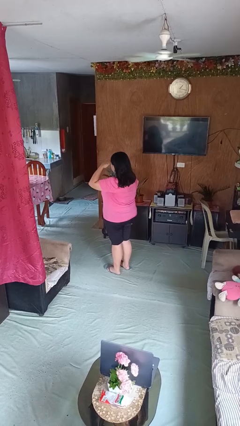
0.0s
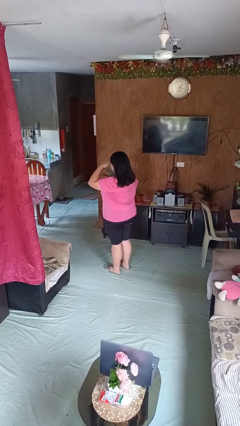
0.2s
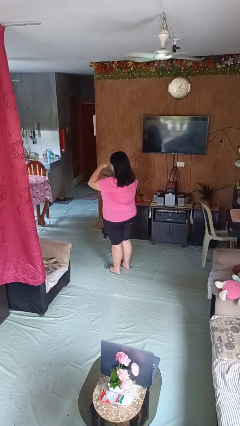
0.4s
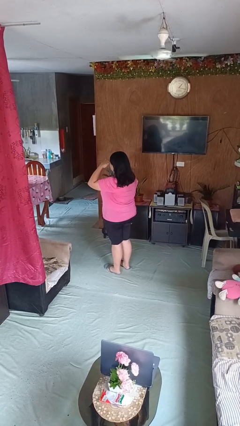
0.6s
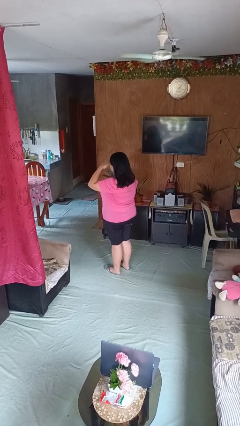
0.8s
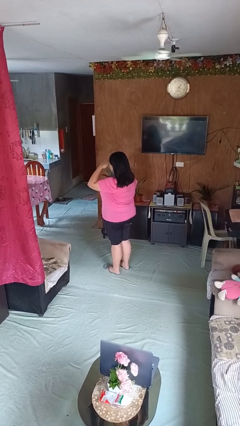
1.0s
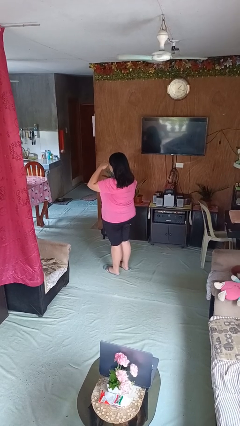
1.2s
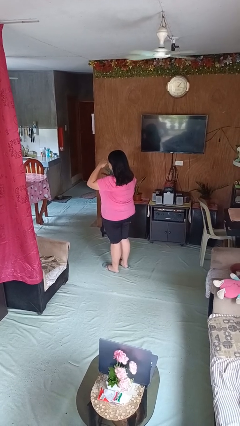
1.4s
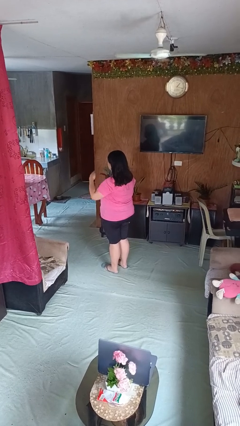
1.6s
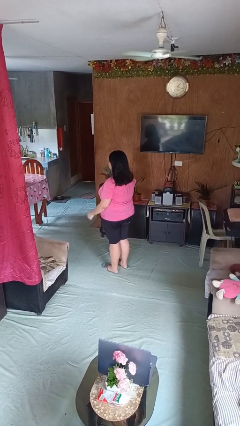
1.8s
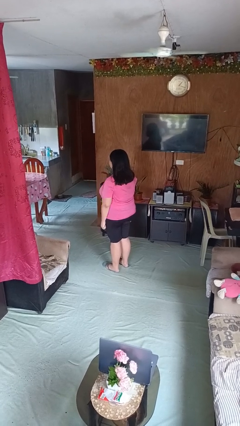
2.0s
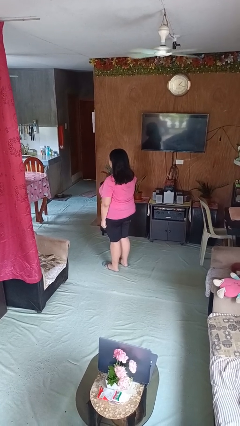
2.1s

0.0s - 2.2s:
person salutes

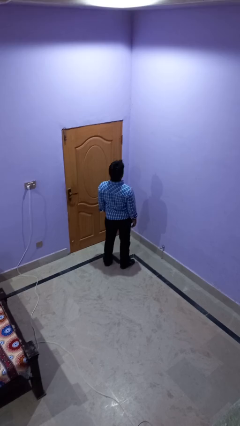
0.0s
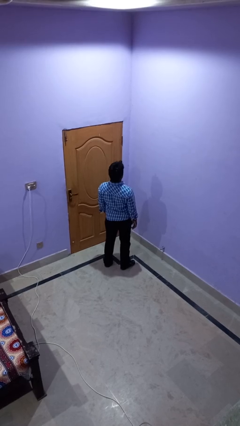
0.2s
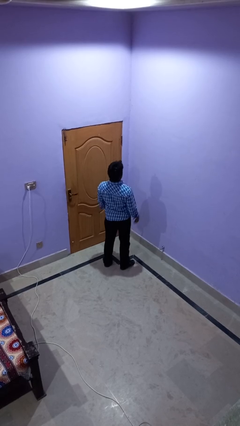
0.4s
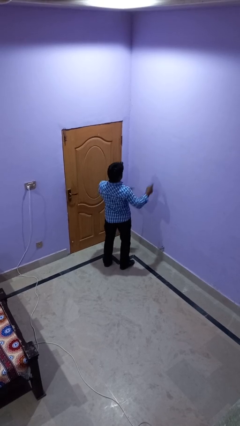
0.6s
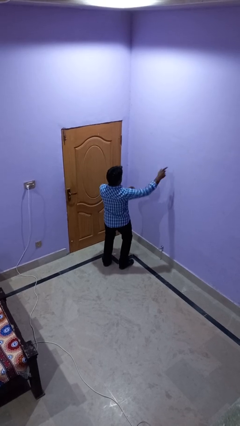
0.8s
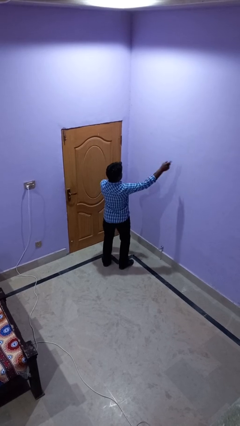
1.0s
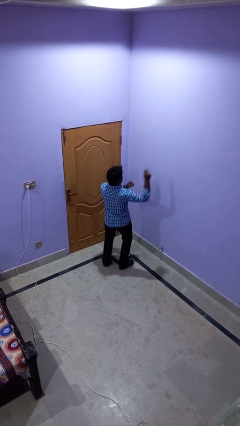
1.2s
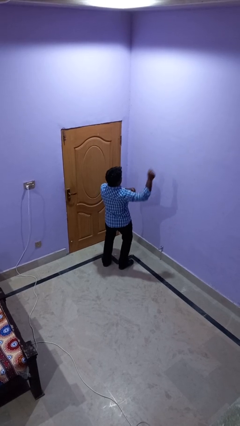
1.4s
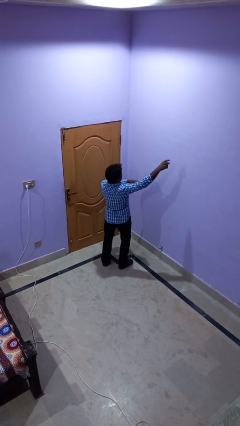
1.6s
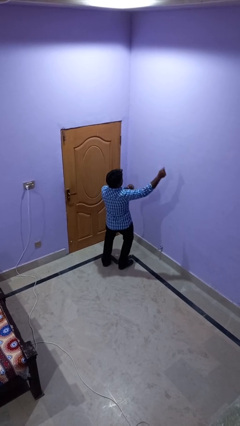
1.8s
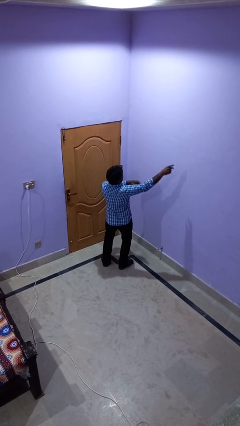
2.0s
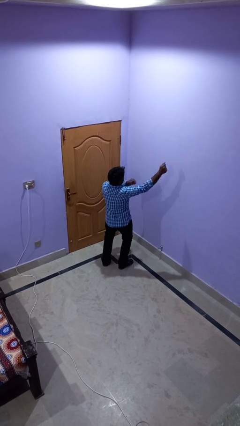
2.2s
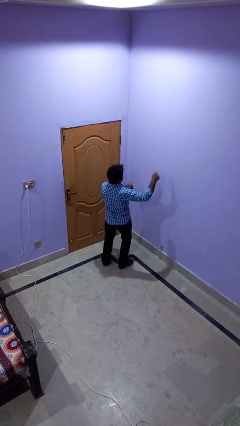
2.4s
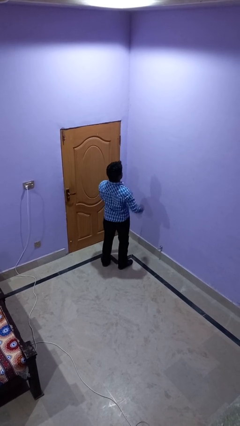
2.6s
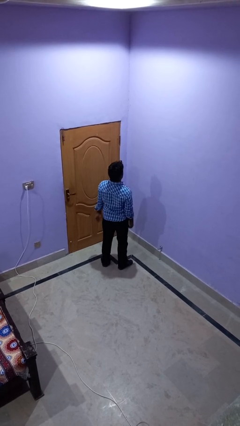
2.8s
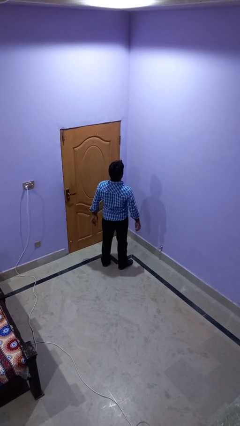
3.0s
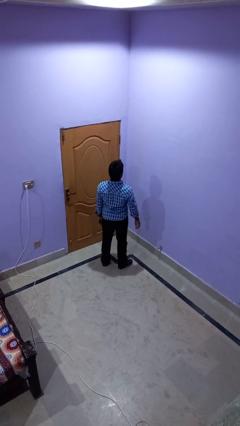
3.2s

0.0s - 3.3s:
person dances in place

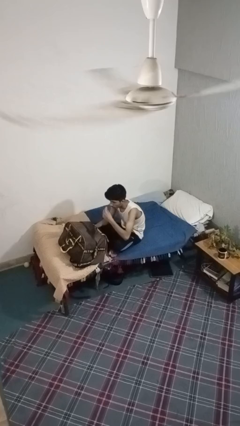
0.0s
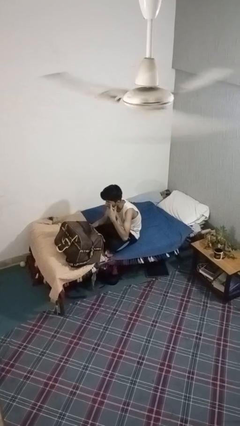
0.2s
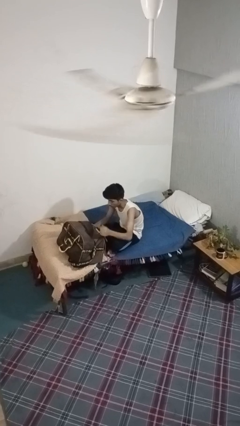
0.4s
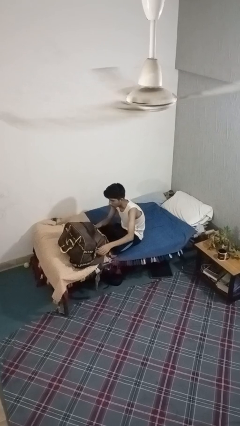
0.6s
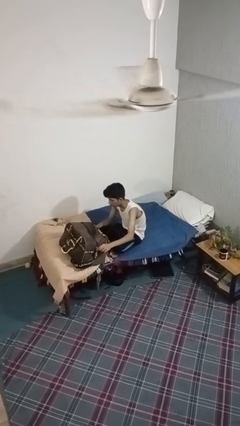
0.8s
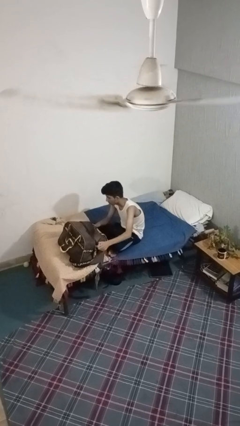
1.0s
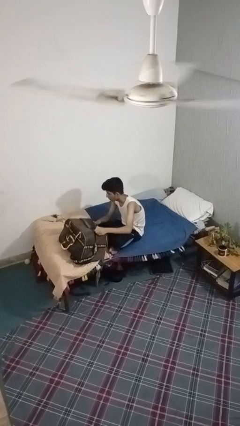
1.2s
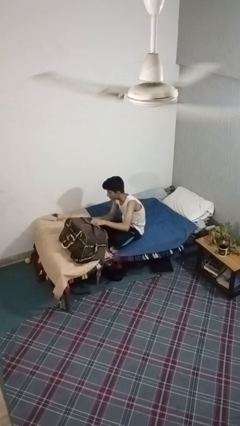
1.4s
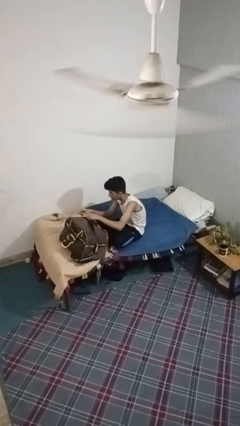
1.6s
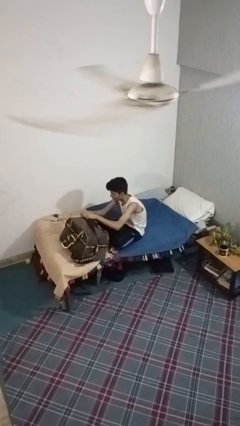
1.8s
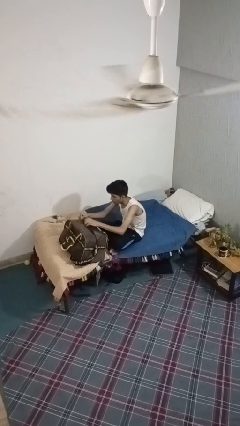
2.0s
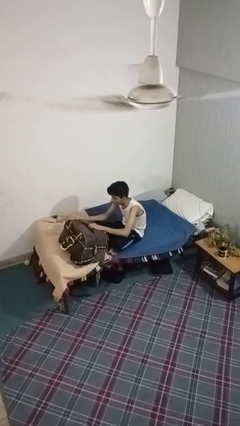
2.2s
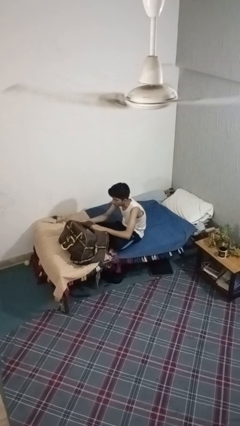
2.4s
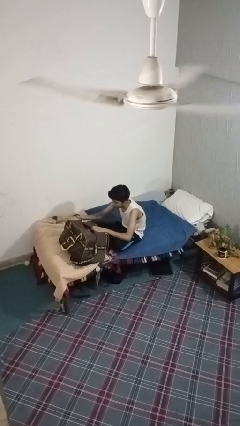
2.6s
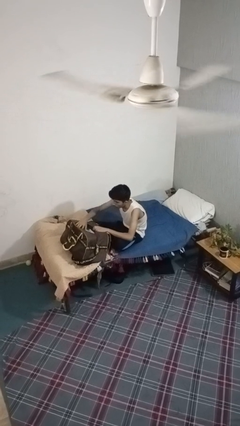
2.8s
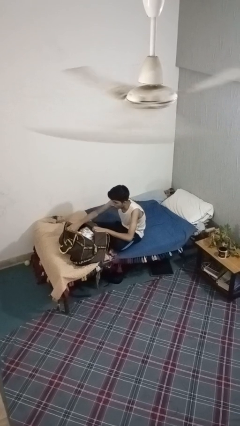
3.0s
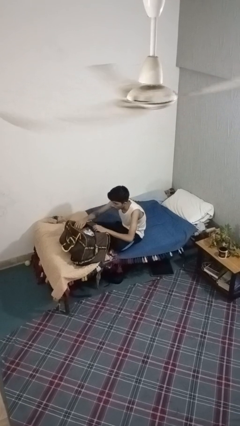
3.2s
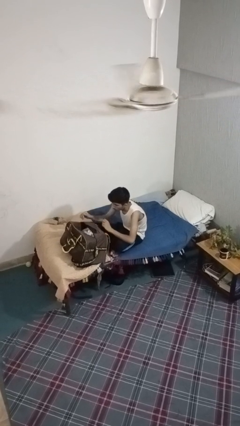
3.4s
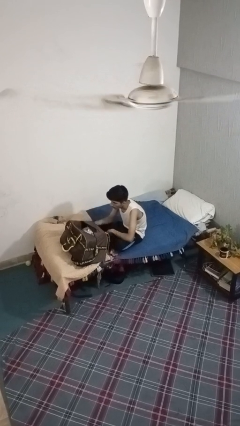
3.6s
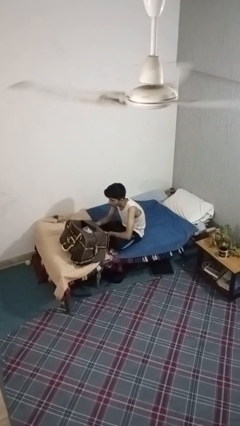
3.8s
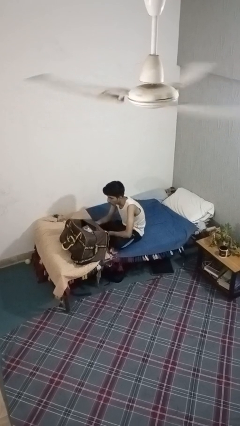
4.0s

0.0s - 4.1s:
person opens suitcase

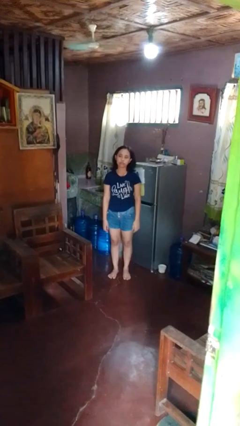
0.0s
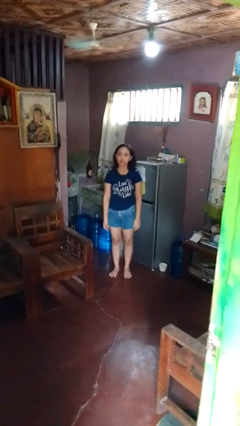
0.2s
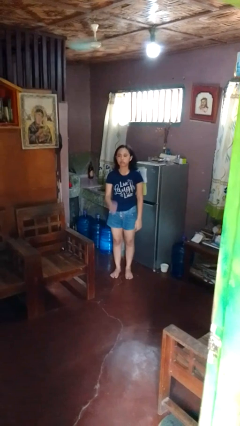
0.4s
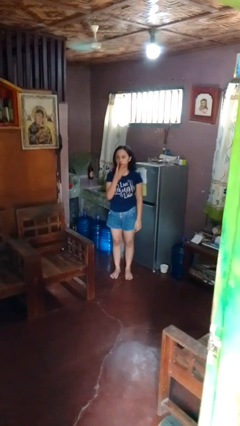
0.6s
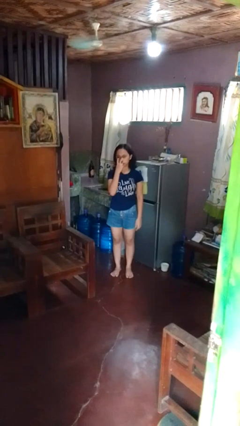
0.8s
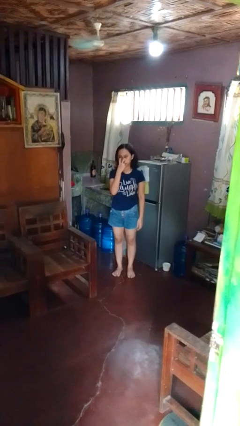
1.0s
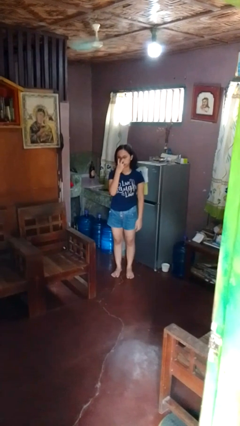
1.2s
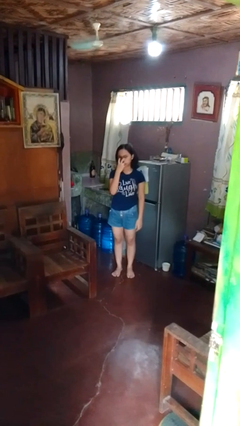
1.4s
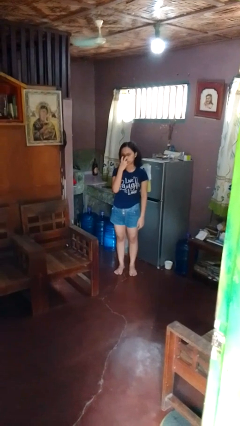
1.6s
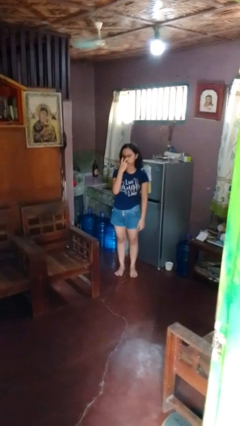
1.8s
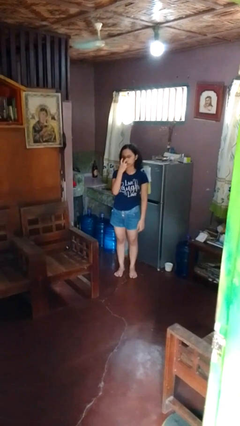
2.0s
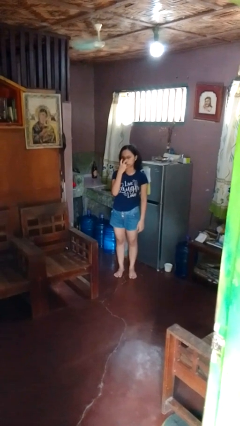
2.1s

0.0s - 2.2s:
person gestures watch closely

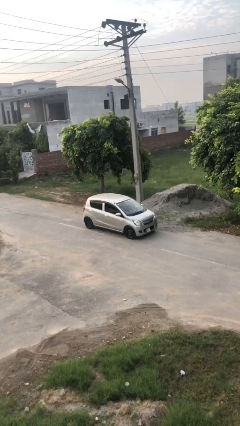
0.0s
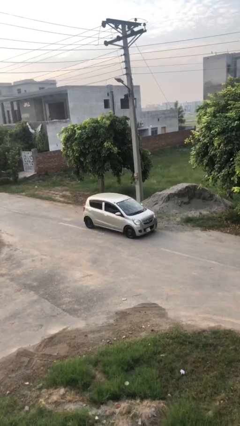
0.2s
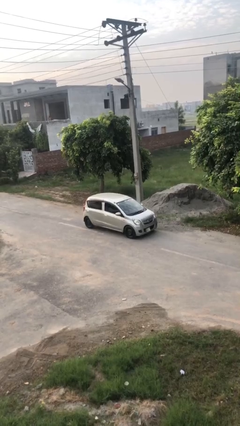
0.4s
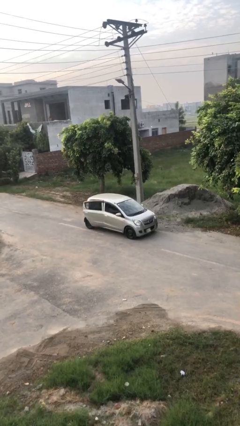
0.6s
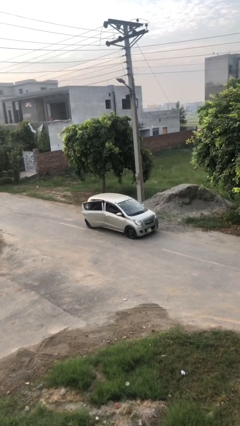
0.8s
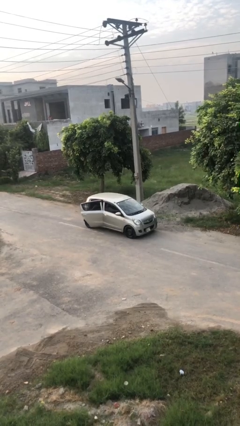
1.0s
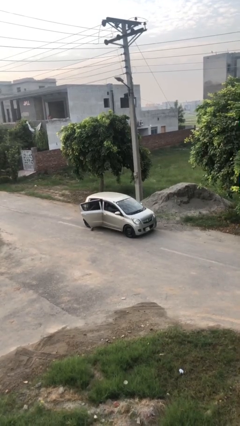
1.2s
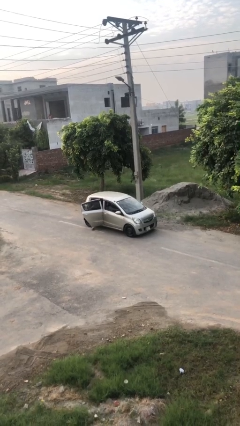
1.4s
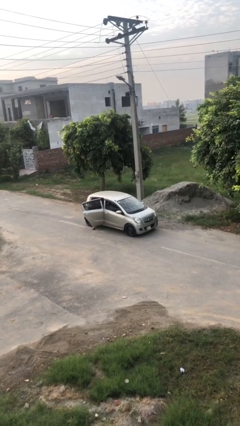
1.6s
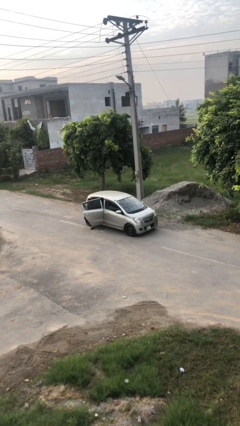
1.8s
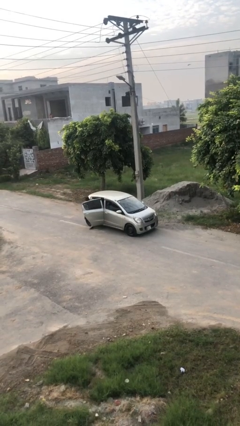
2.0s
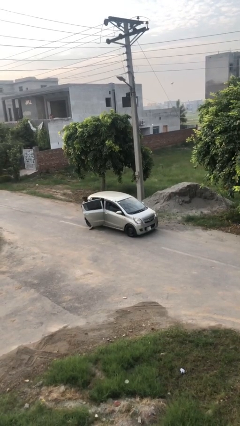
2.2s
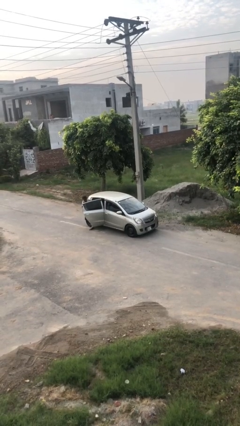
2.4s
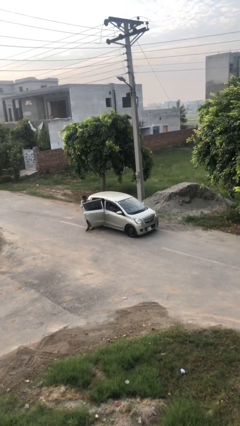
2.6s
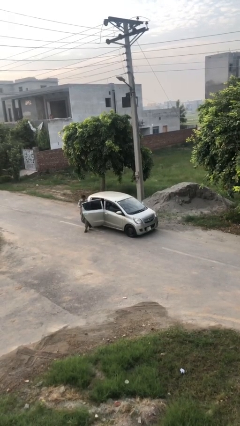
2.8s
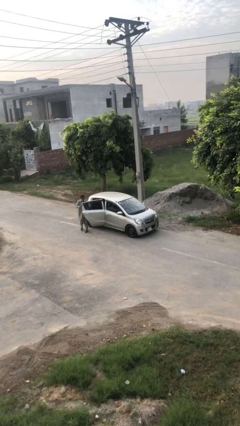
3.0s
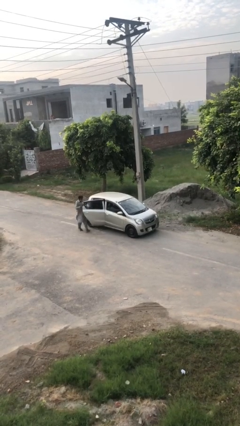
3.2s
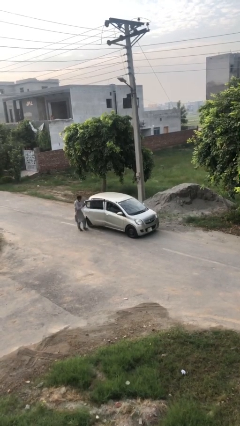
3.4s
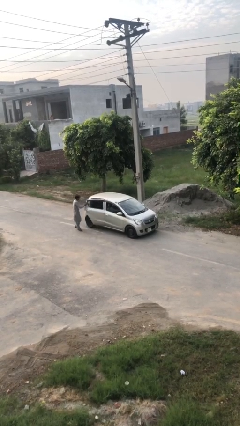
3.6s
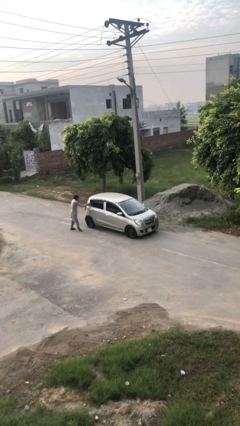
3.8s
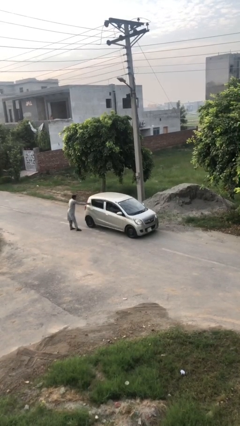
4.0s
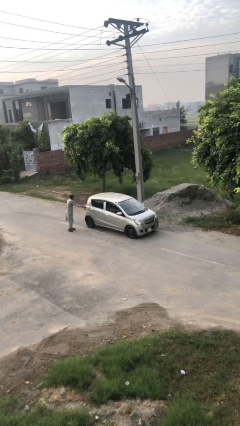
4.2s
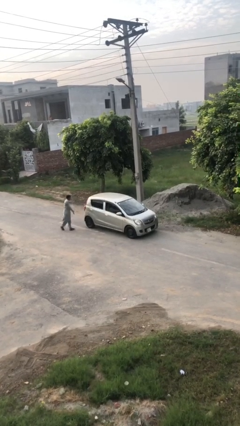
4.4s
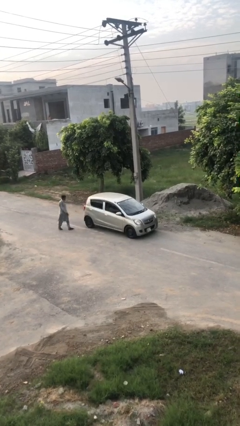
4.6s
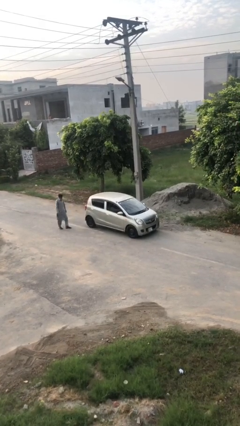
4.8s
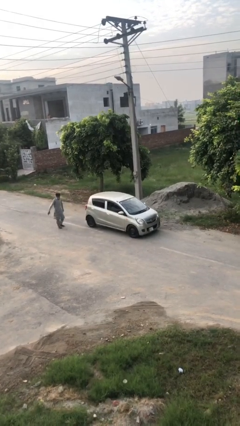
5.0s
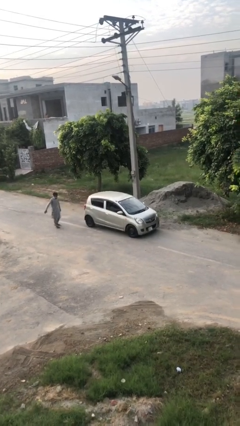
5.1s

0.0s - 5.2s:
car drops off person

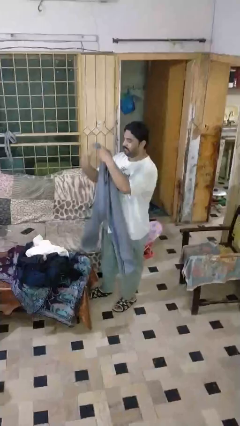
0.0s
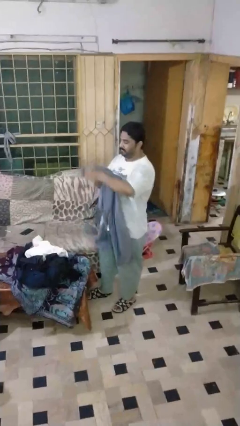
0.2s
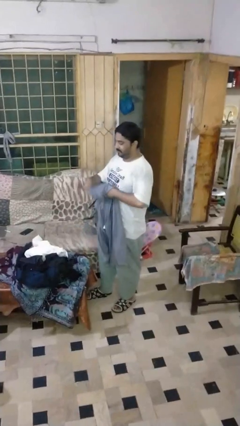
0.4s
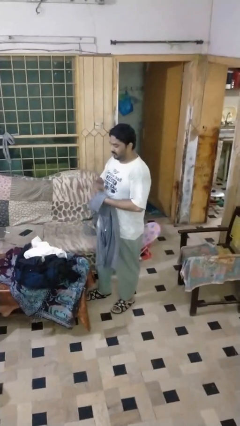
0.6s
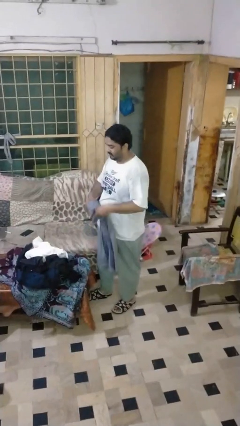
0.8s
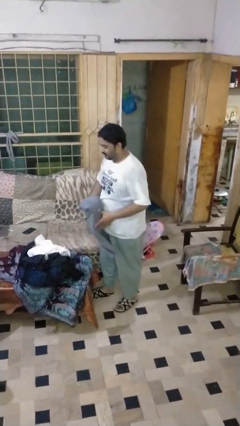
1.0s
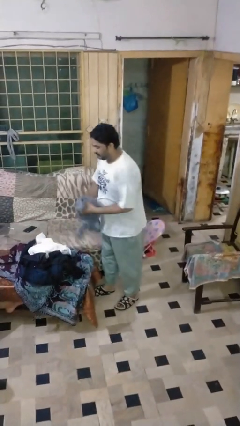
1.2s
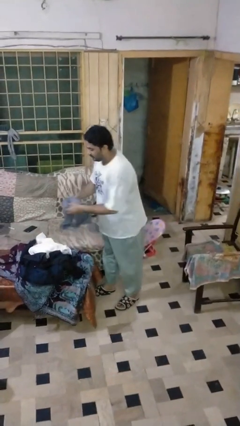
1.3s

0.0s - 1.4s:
person folds pants
